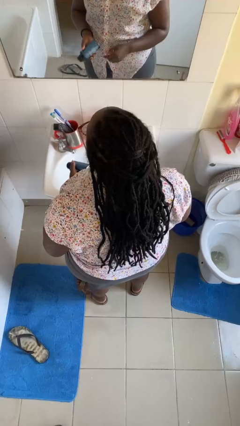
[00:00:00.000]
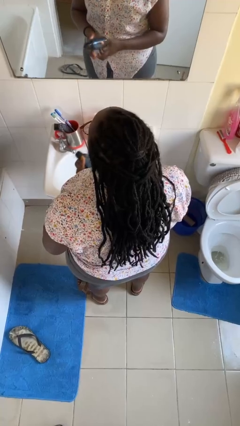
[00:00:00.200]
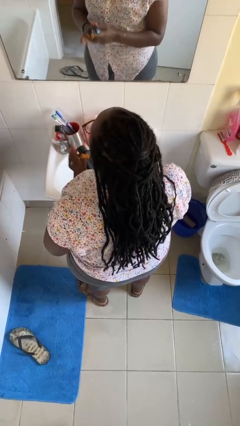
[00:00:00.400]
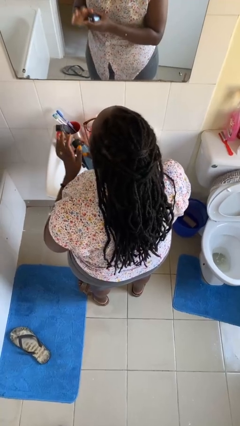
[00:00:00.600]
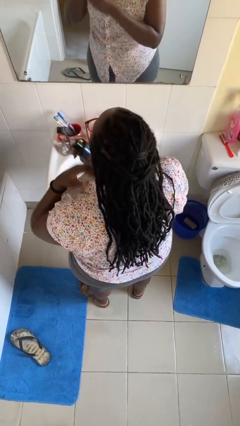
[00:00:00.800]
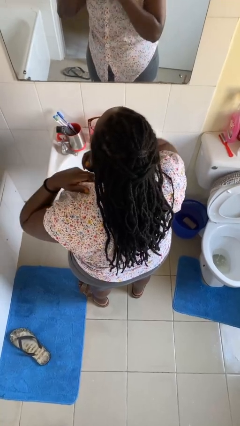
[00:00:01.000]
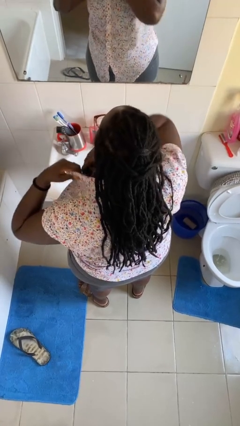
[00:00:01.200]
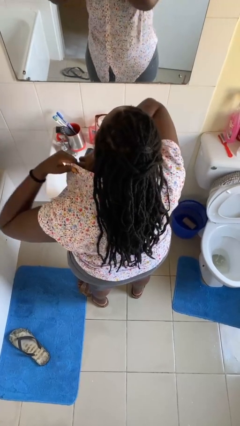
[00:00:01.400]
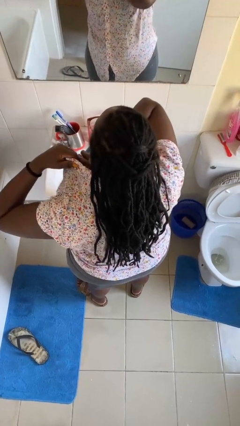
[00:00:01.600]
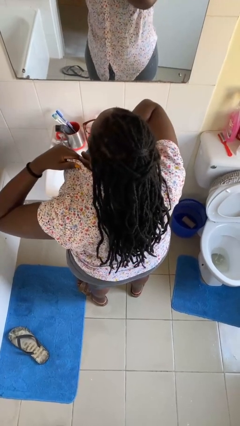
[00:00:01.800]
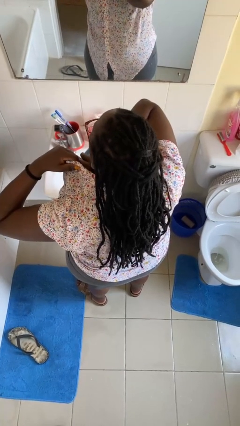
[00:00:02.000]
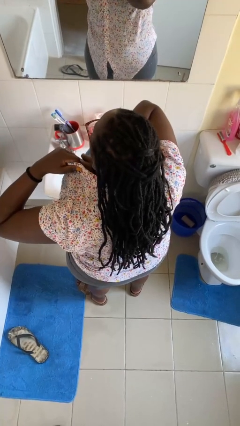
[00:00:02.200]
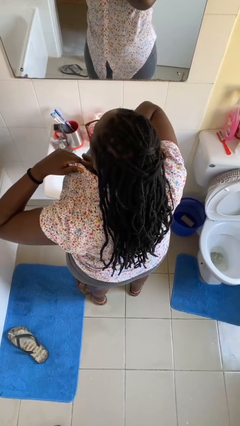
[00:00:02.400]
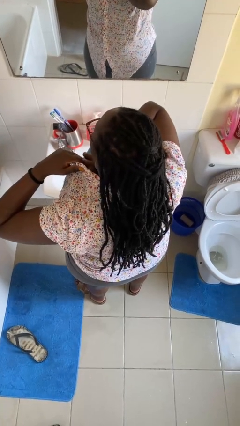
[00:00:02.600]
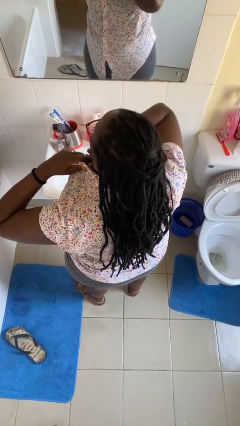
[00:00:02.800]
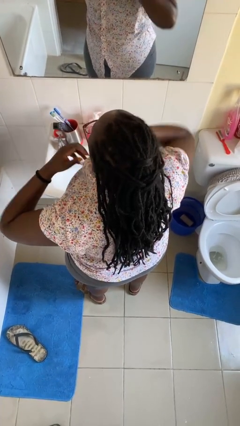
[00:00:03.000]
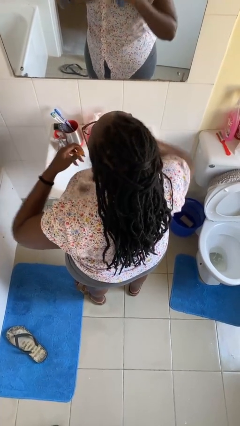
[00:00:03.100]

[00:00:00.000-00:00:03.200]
person applies deodorant

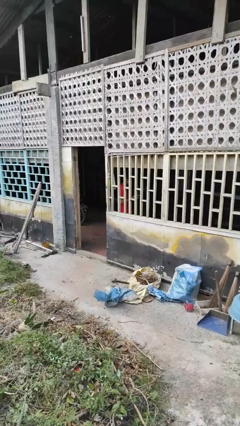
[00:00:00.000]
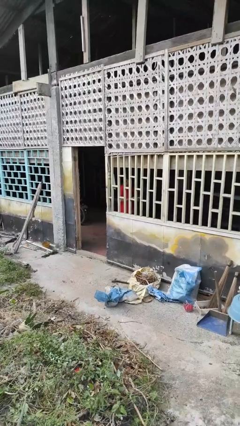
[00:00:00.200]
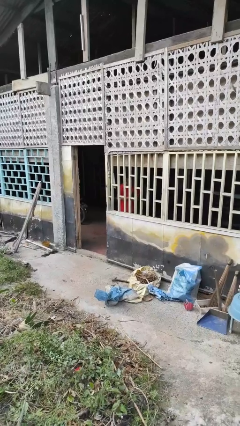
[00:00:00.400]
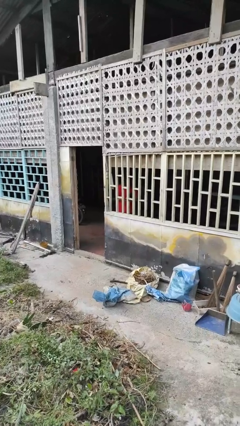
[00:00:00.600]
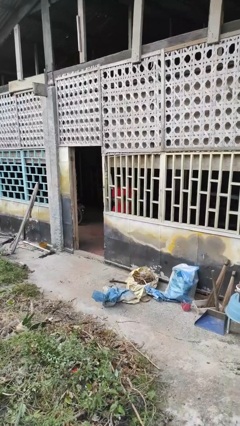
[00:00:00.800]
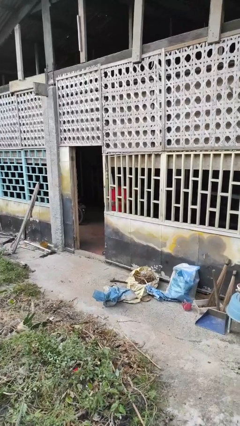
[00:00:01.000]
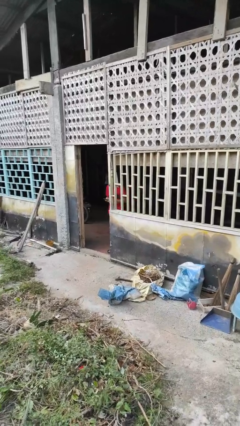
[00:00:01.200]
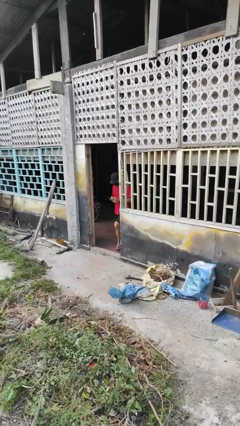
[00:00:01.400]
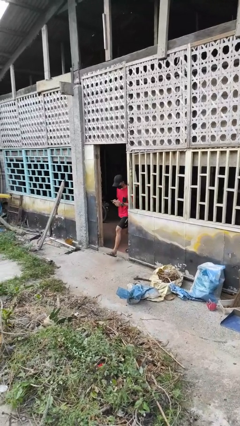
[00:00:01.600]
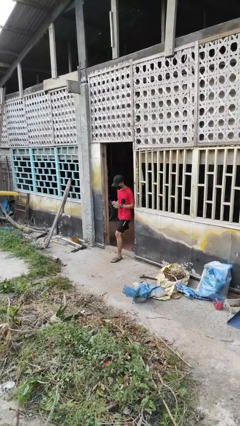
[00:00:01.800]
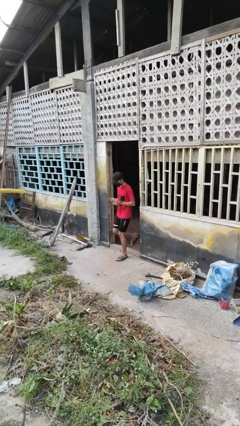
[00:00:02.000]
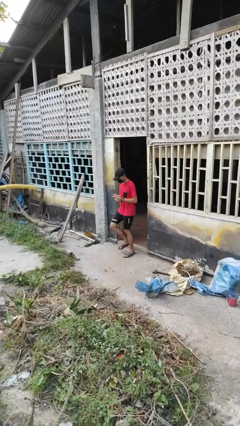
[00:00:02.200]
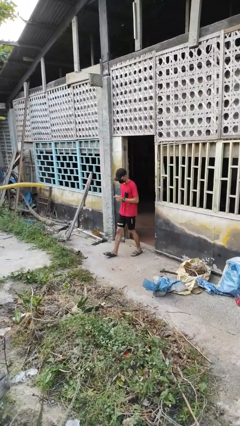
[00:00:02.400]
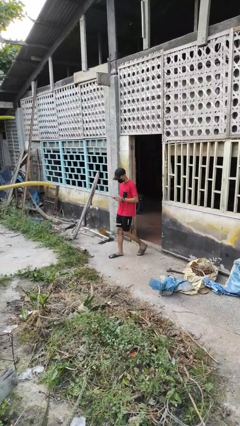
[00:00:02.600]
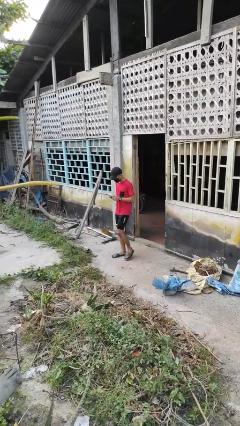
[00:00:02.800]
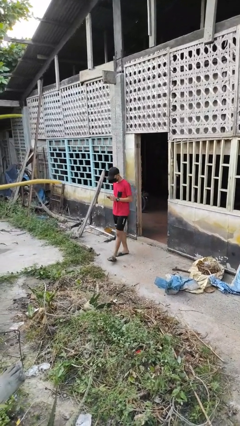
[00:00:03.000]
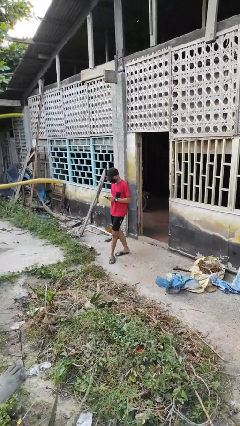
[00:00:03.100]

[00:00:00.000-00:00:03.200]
person exits scene through structure

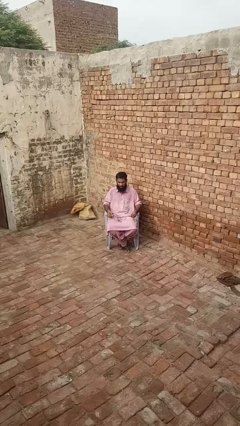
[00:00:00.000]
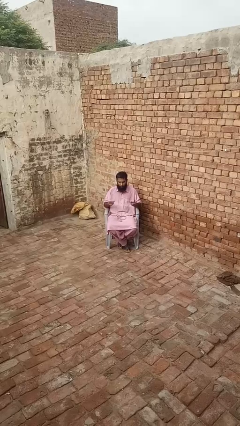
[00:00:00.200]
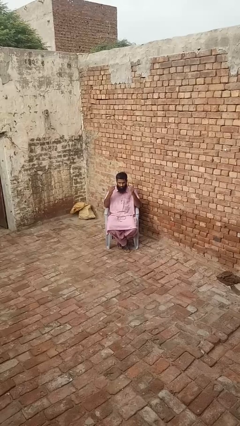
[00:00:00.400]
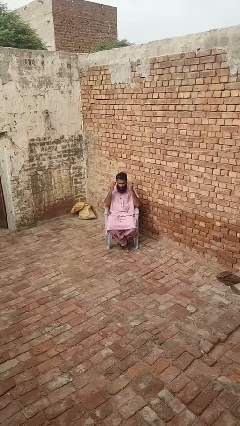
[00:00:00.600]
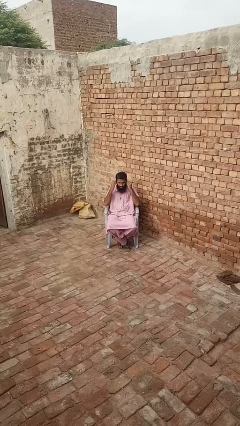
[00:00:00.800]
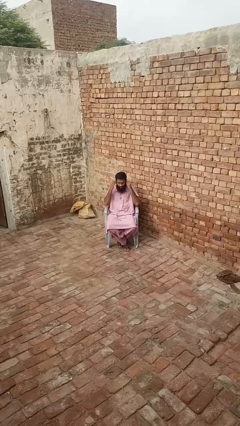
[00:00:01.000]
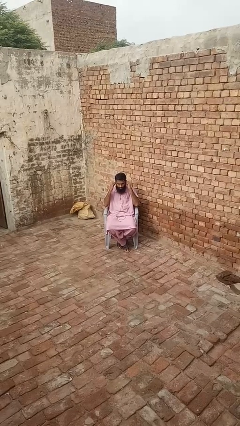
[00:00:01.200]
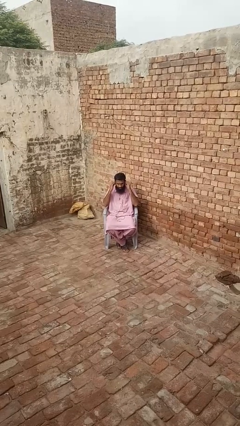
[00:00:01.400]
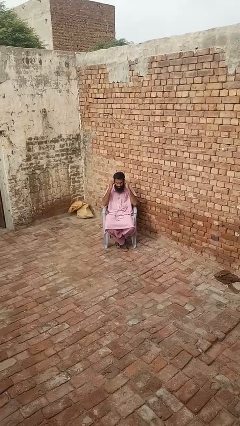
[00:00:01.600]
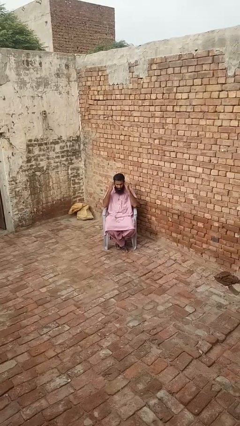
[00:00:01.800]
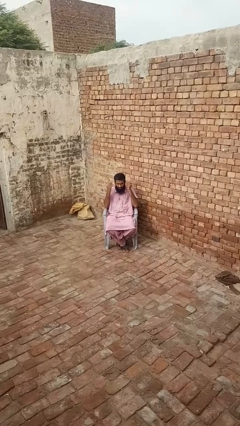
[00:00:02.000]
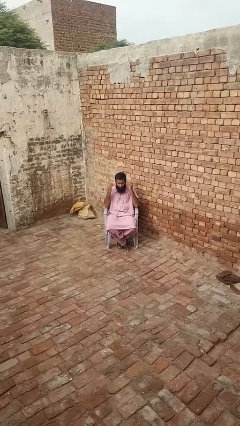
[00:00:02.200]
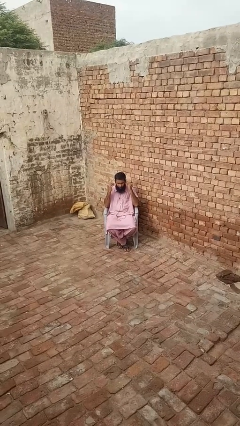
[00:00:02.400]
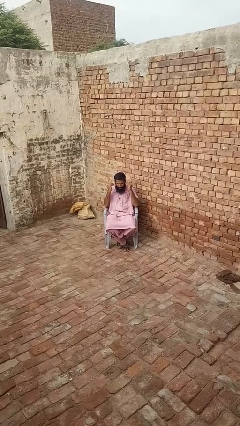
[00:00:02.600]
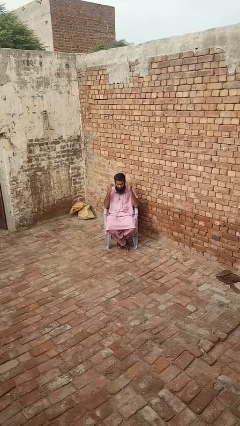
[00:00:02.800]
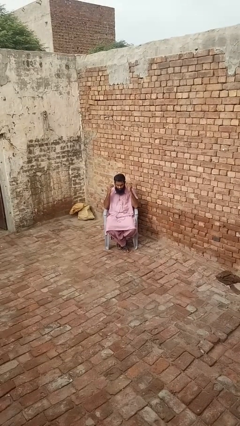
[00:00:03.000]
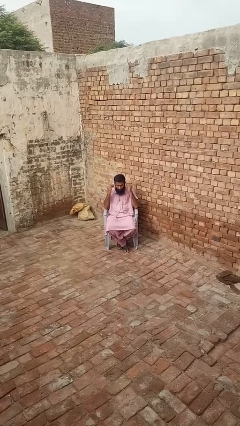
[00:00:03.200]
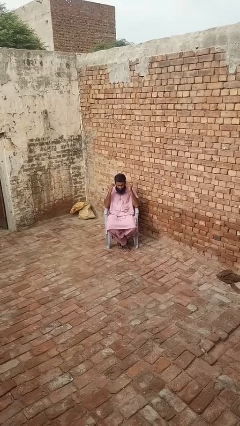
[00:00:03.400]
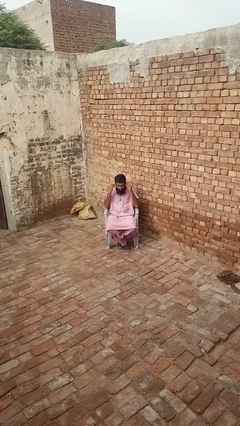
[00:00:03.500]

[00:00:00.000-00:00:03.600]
person puts on headphones

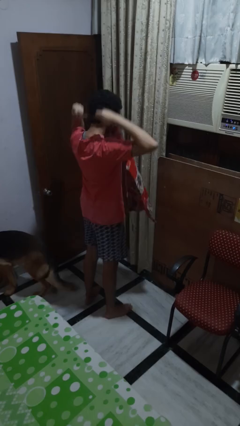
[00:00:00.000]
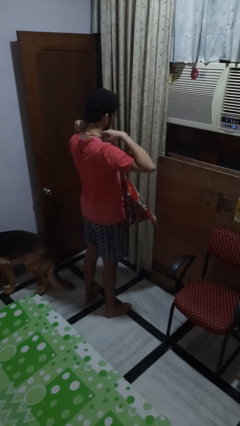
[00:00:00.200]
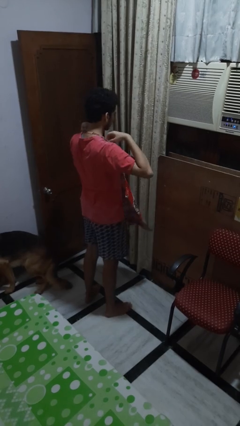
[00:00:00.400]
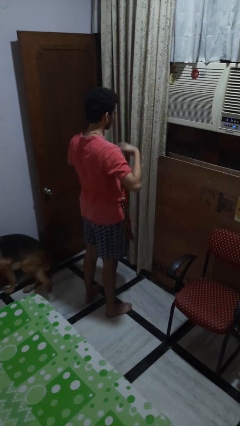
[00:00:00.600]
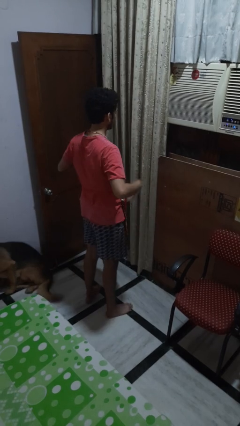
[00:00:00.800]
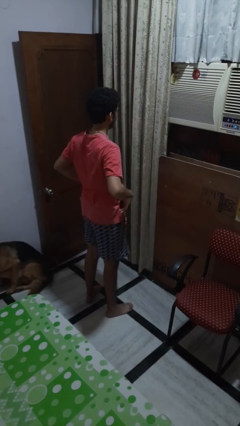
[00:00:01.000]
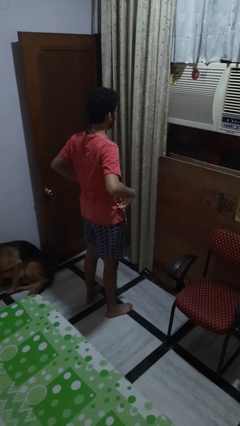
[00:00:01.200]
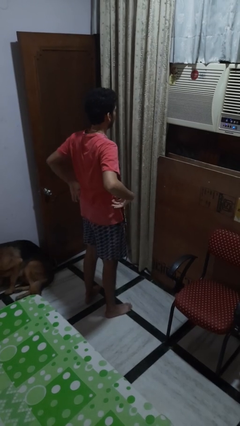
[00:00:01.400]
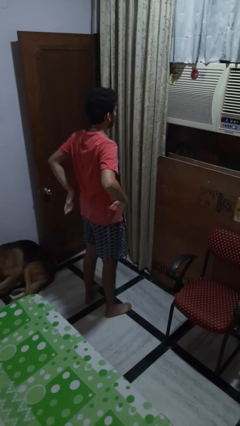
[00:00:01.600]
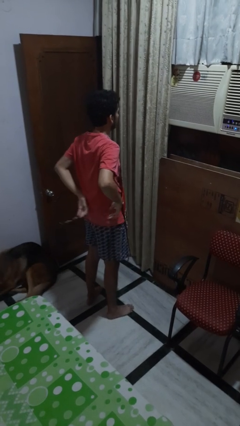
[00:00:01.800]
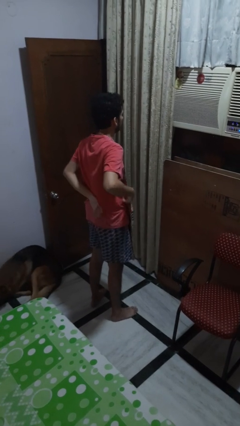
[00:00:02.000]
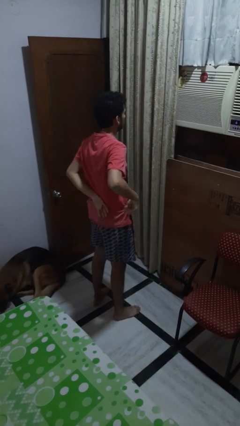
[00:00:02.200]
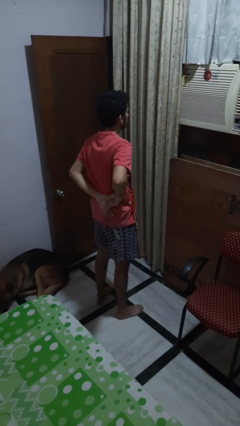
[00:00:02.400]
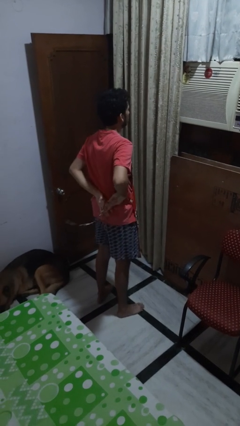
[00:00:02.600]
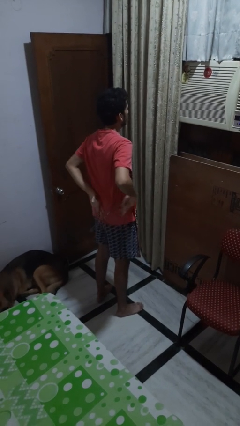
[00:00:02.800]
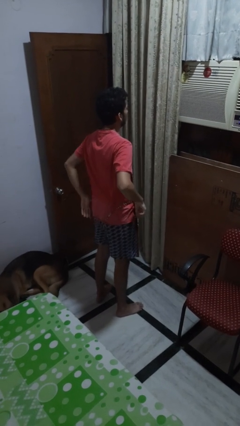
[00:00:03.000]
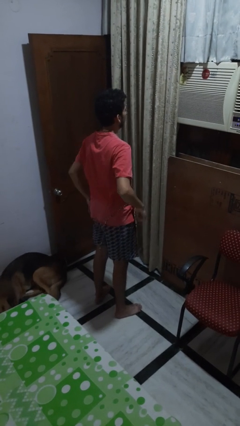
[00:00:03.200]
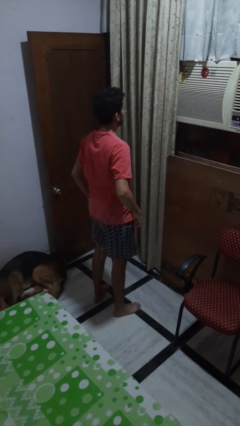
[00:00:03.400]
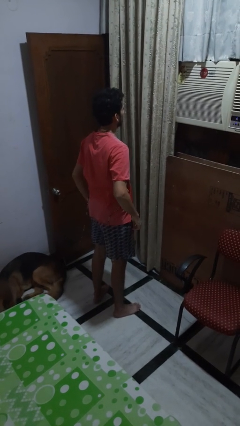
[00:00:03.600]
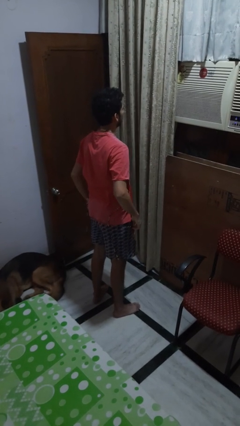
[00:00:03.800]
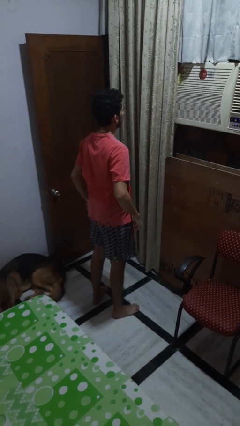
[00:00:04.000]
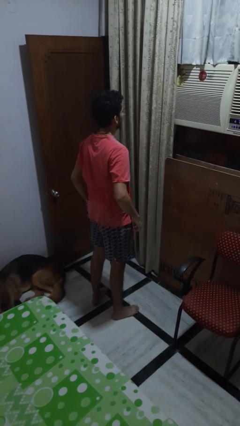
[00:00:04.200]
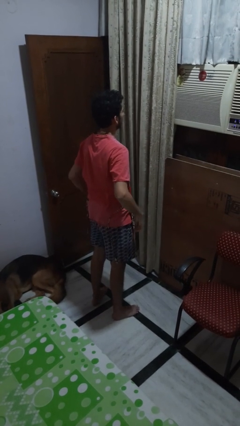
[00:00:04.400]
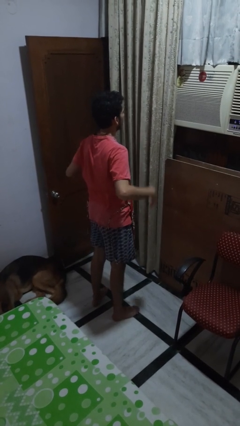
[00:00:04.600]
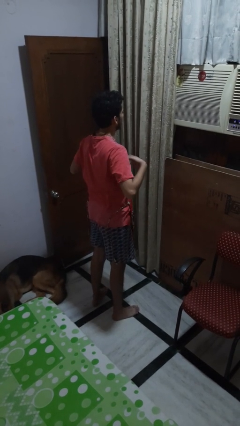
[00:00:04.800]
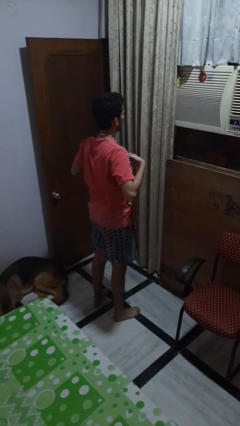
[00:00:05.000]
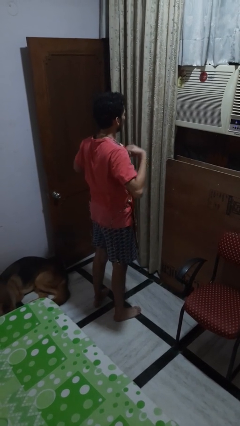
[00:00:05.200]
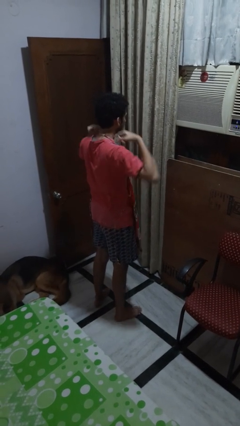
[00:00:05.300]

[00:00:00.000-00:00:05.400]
person puts on apron

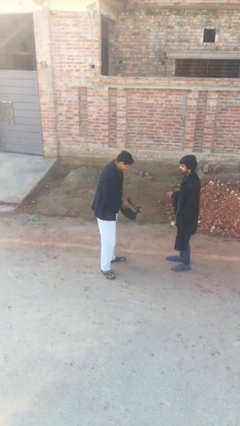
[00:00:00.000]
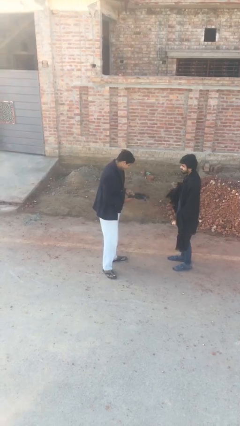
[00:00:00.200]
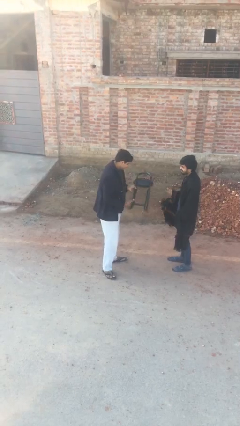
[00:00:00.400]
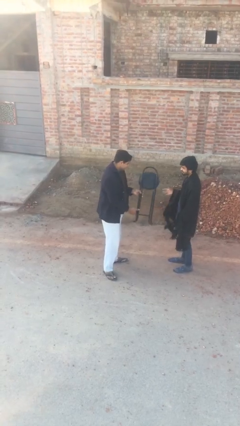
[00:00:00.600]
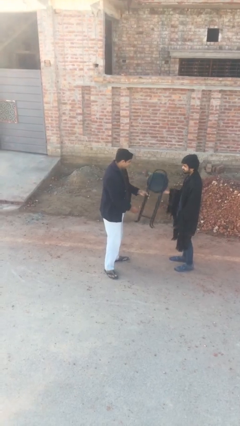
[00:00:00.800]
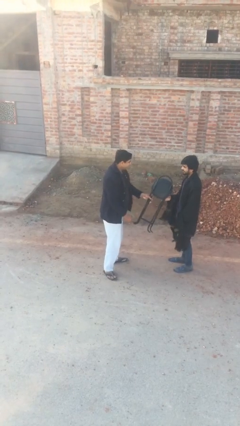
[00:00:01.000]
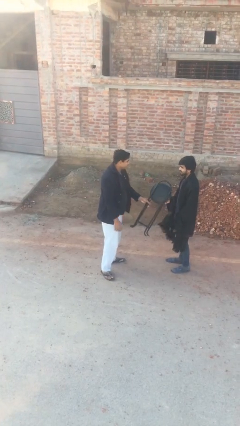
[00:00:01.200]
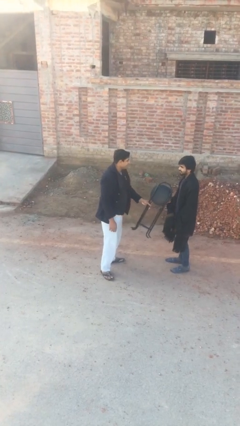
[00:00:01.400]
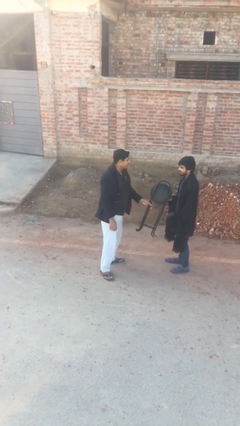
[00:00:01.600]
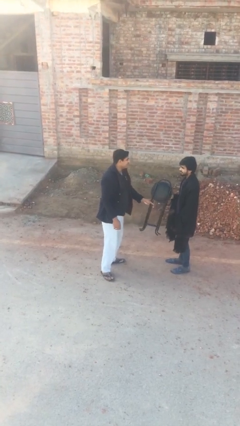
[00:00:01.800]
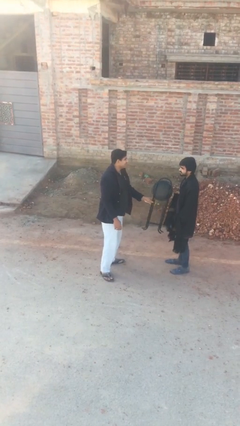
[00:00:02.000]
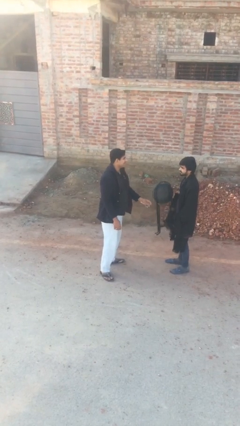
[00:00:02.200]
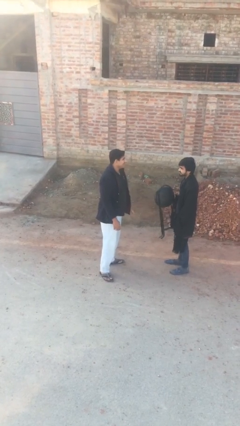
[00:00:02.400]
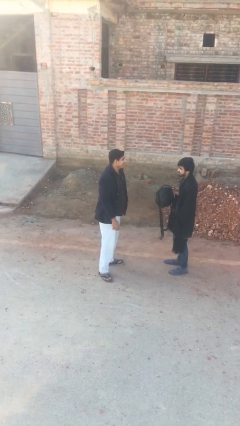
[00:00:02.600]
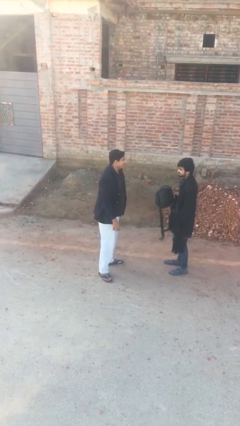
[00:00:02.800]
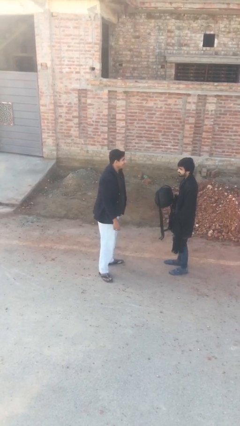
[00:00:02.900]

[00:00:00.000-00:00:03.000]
person transfers object to person